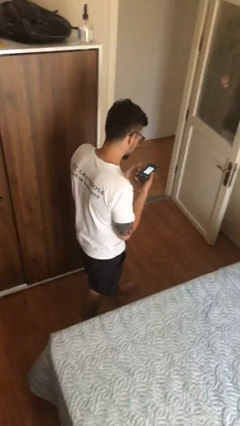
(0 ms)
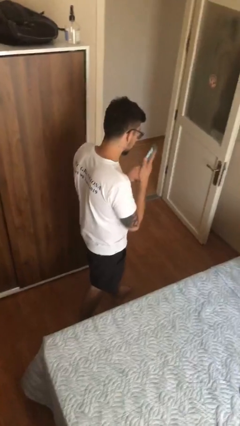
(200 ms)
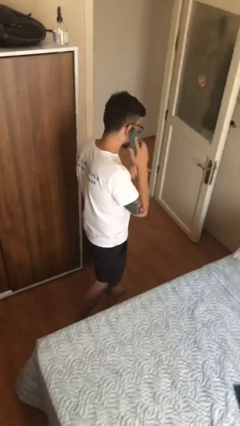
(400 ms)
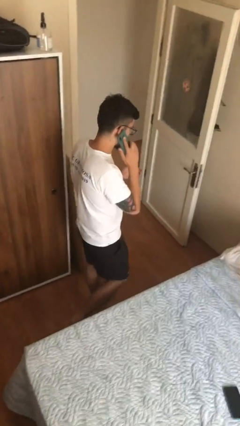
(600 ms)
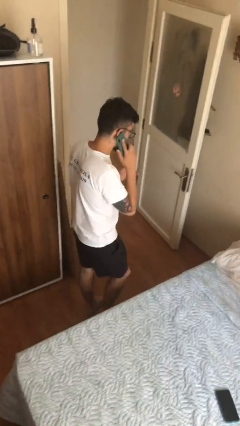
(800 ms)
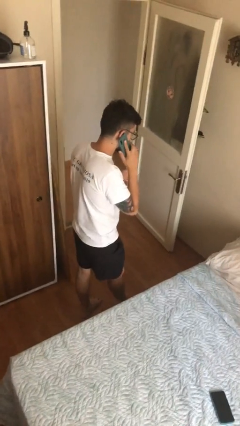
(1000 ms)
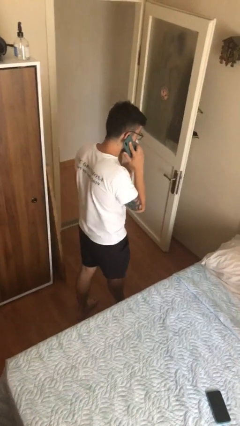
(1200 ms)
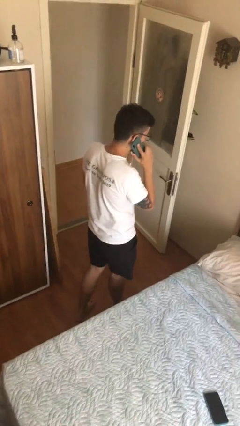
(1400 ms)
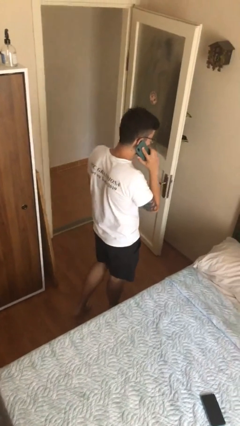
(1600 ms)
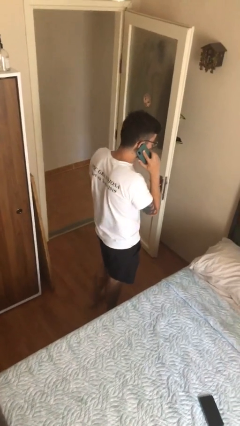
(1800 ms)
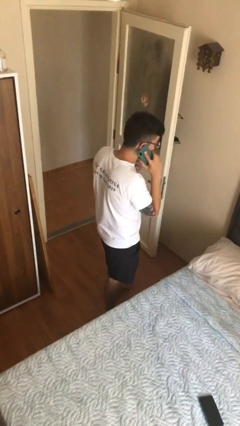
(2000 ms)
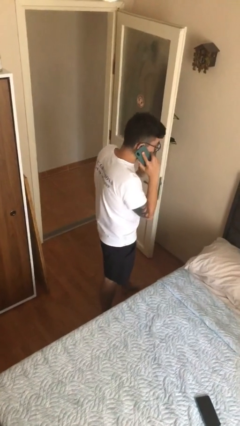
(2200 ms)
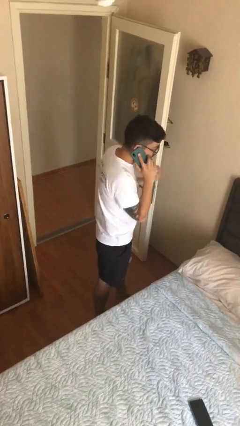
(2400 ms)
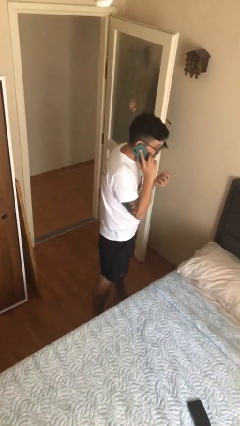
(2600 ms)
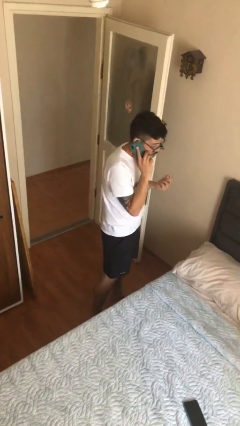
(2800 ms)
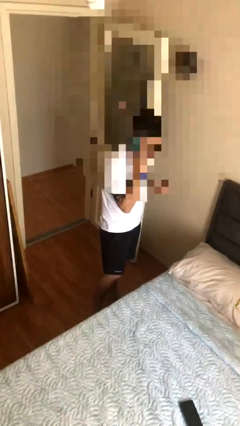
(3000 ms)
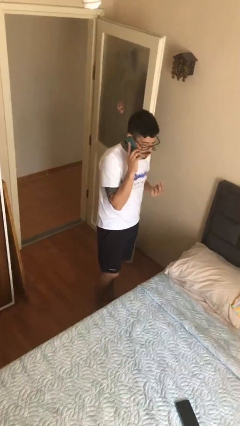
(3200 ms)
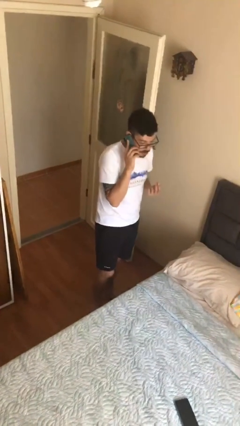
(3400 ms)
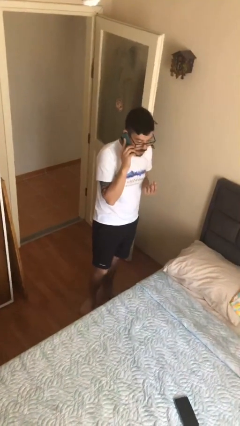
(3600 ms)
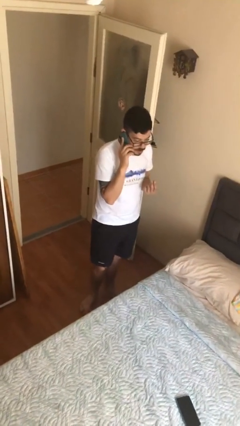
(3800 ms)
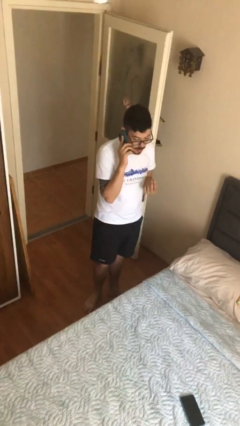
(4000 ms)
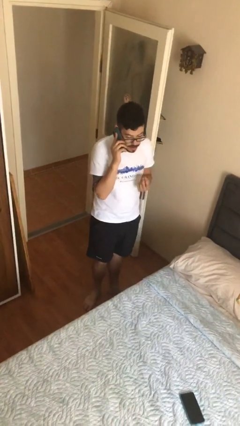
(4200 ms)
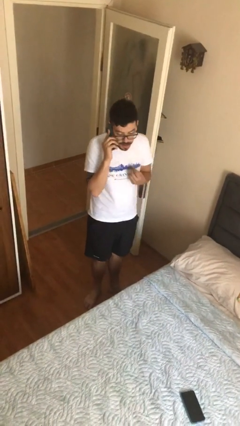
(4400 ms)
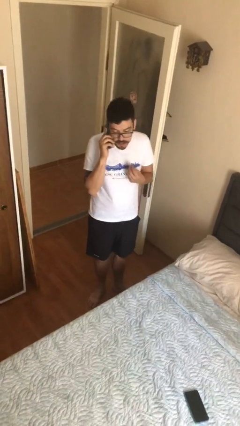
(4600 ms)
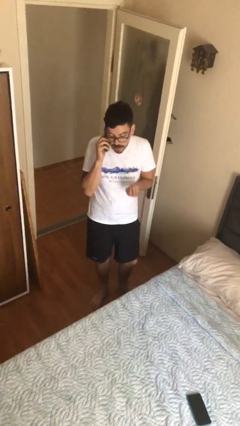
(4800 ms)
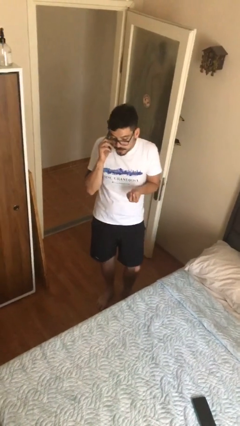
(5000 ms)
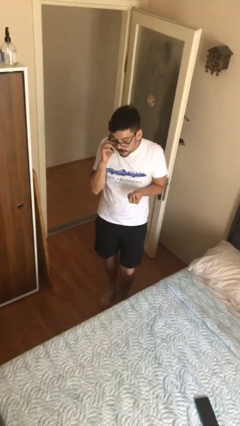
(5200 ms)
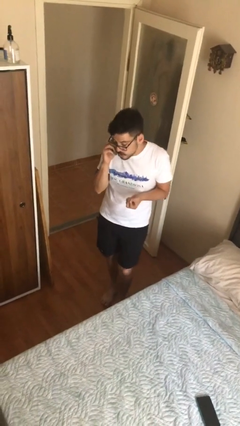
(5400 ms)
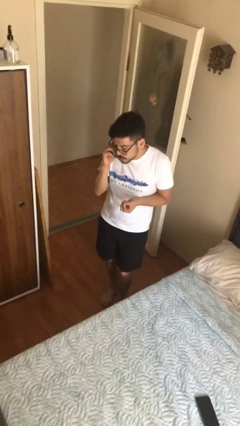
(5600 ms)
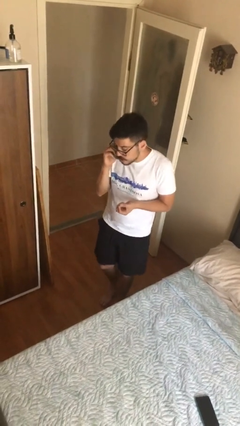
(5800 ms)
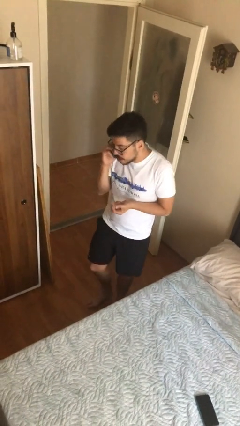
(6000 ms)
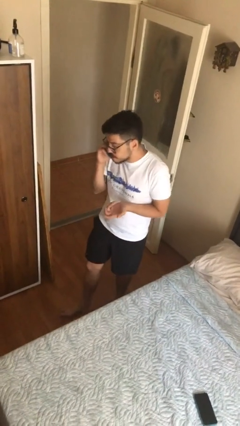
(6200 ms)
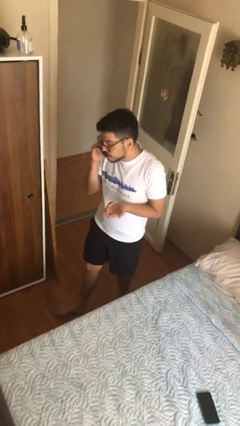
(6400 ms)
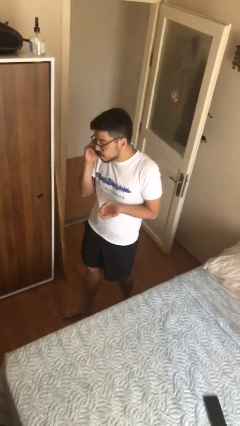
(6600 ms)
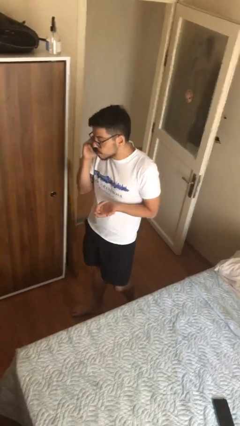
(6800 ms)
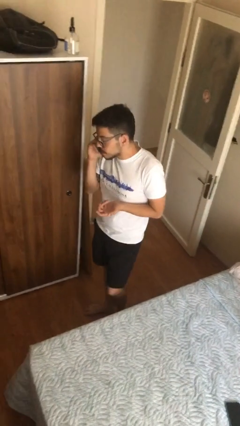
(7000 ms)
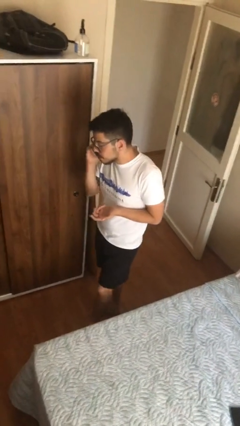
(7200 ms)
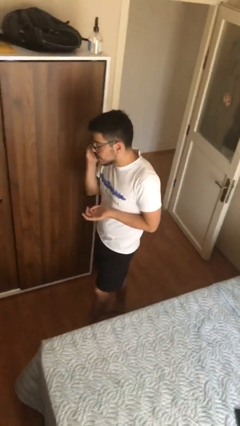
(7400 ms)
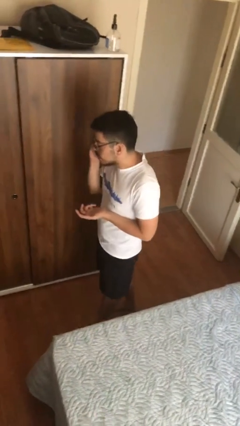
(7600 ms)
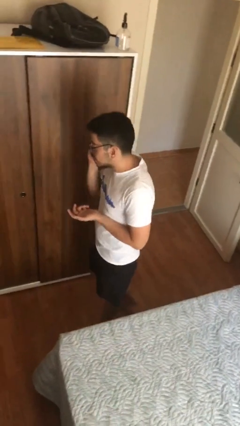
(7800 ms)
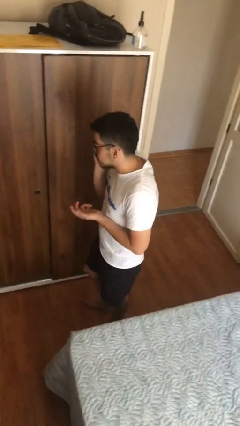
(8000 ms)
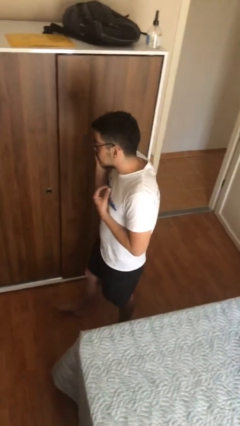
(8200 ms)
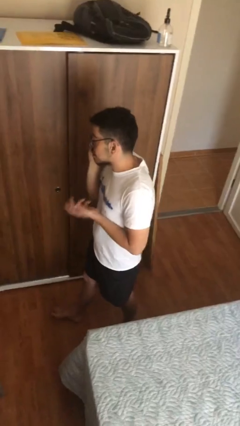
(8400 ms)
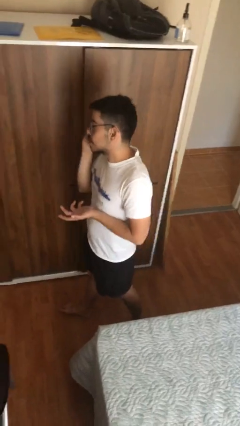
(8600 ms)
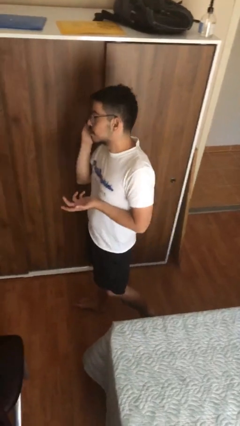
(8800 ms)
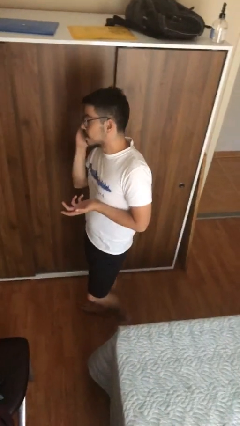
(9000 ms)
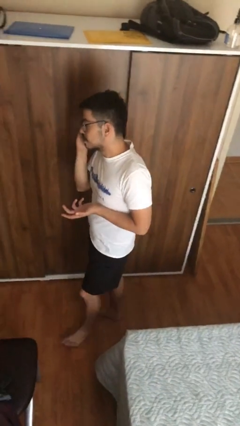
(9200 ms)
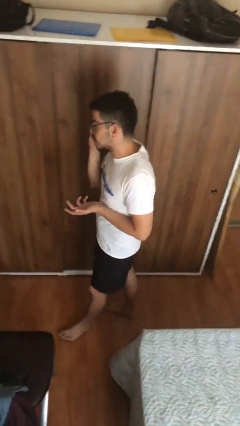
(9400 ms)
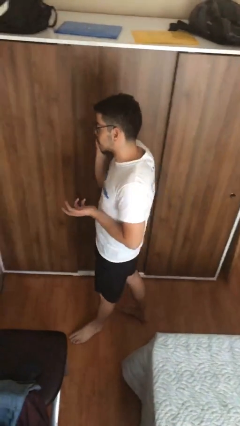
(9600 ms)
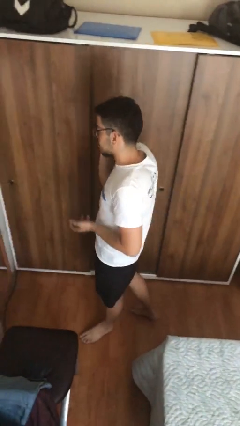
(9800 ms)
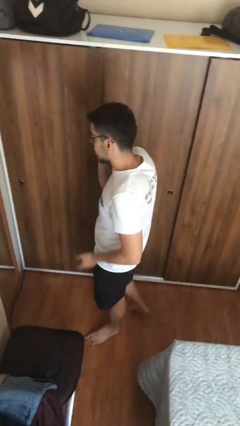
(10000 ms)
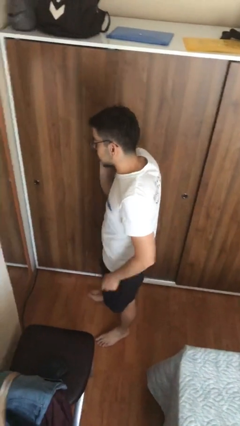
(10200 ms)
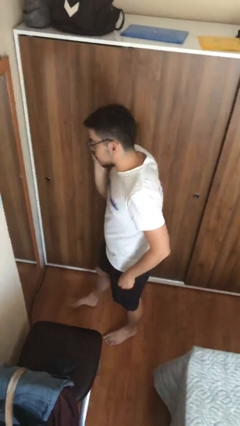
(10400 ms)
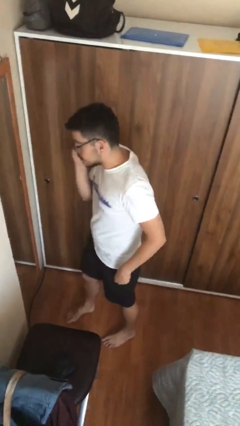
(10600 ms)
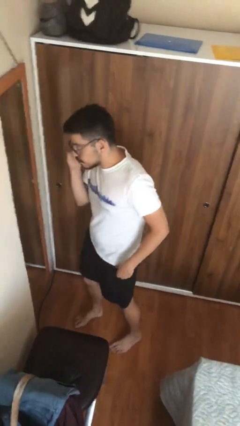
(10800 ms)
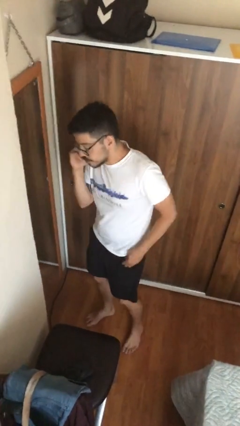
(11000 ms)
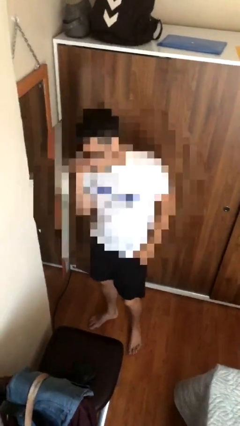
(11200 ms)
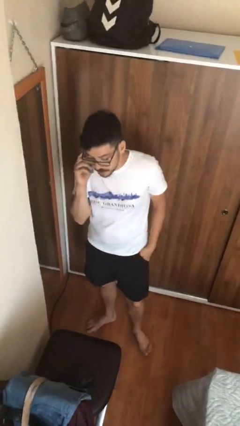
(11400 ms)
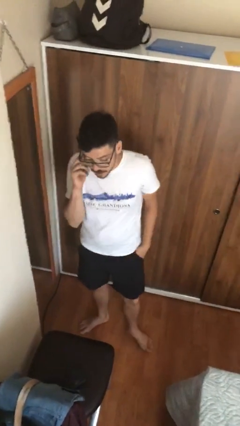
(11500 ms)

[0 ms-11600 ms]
person talks on phone

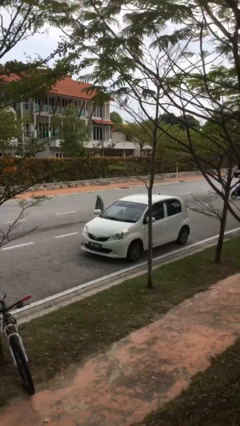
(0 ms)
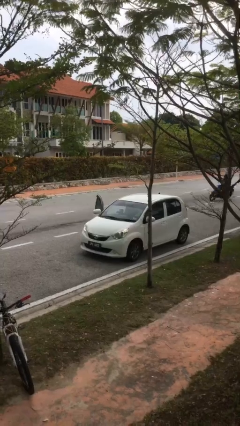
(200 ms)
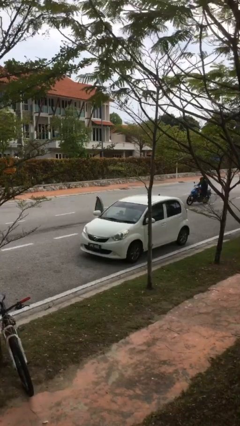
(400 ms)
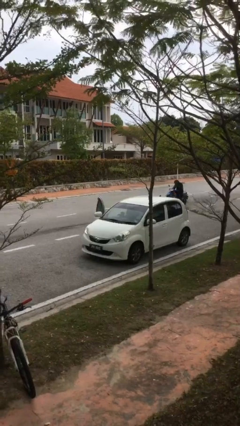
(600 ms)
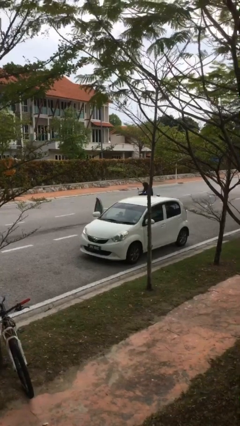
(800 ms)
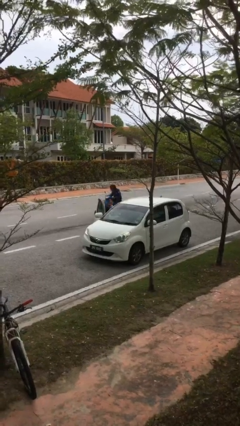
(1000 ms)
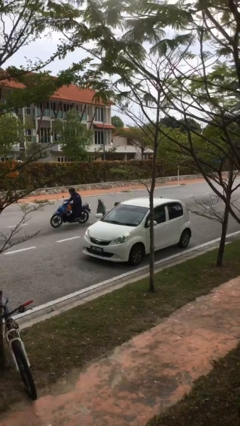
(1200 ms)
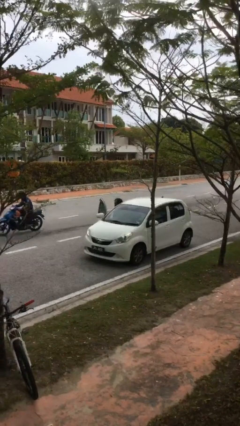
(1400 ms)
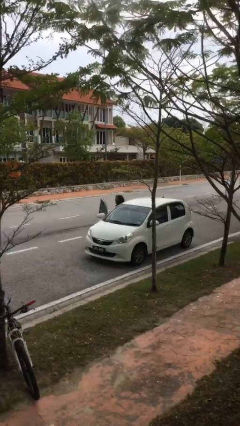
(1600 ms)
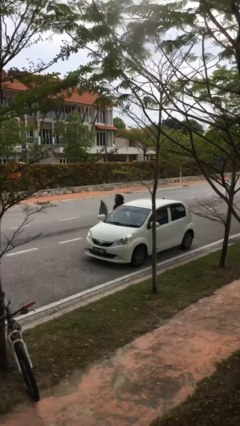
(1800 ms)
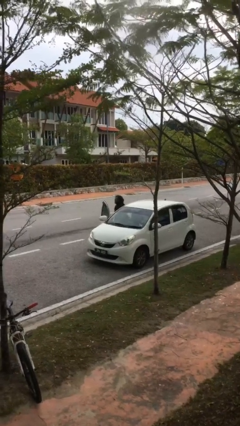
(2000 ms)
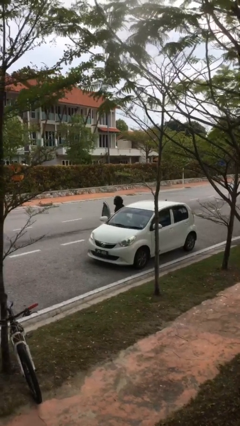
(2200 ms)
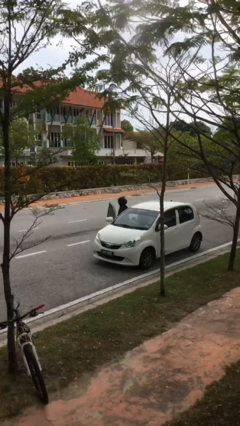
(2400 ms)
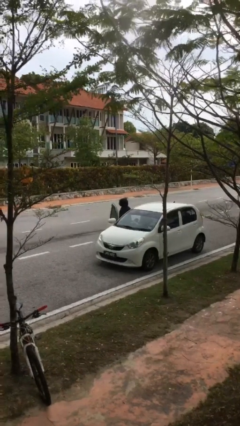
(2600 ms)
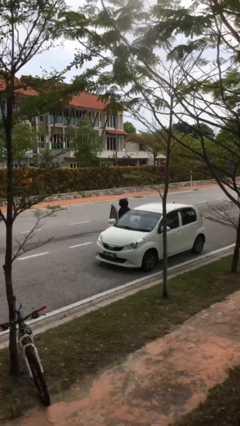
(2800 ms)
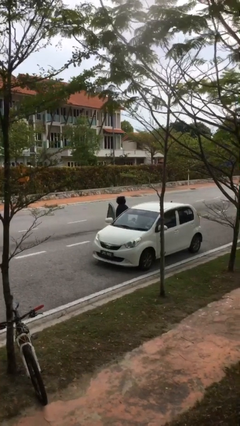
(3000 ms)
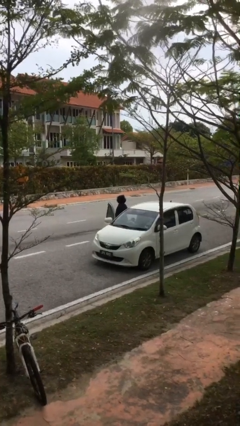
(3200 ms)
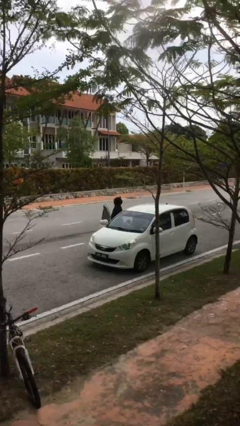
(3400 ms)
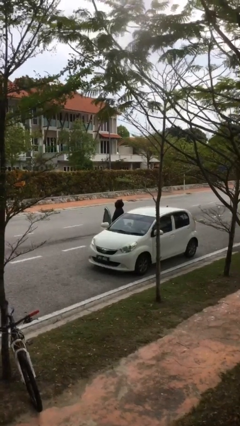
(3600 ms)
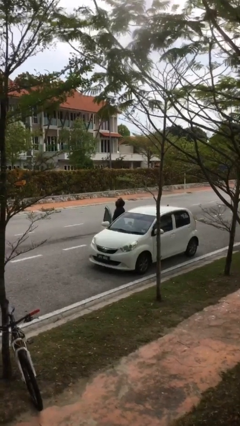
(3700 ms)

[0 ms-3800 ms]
person exits car

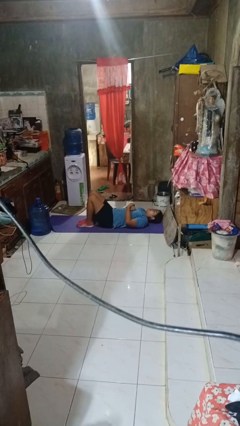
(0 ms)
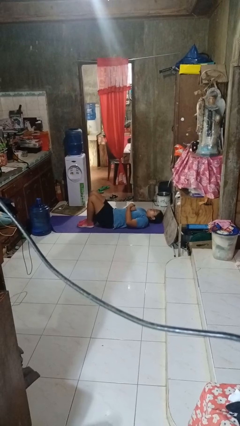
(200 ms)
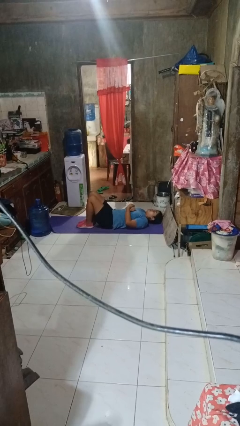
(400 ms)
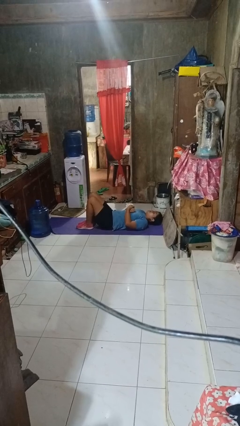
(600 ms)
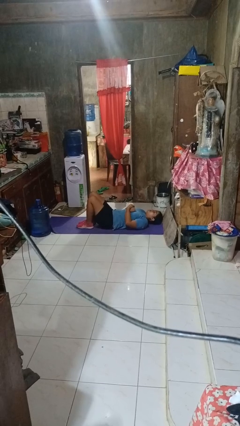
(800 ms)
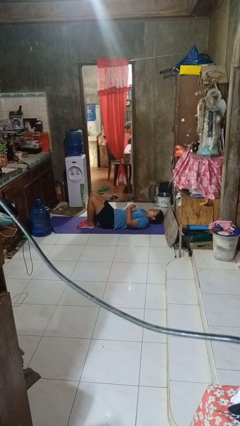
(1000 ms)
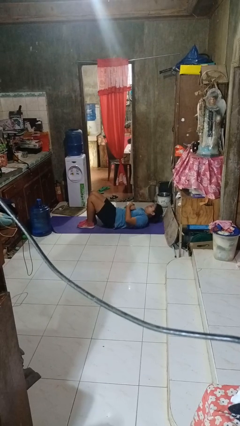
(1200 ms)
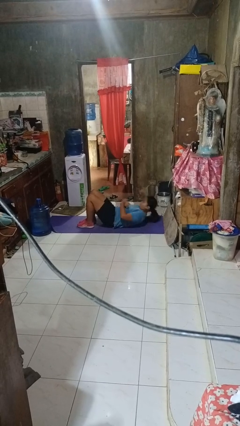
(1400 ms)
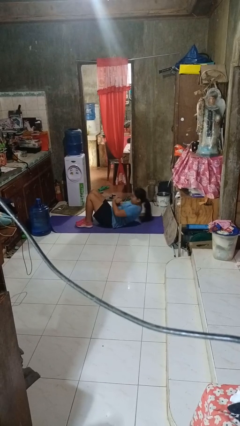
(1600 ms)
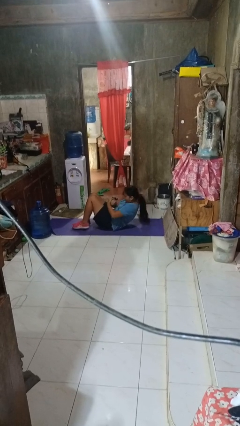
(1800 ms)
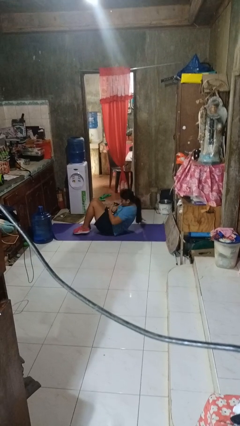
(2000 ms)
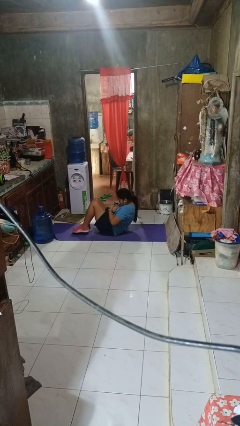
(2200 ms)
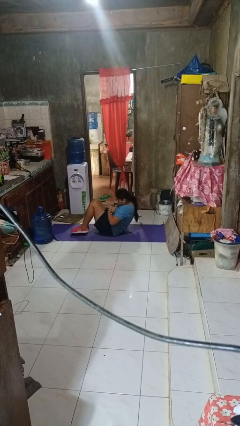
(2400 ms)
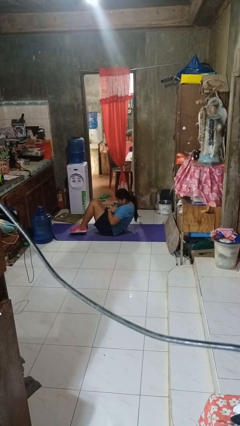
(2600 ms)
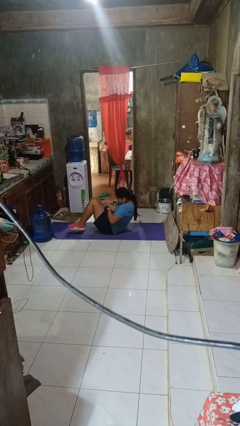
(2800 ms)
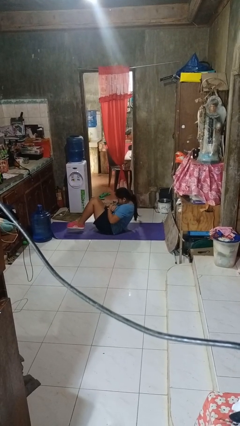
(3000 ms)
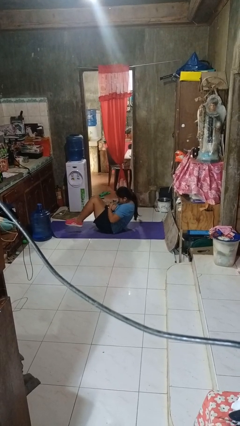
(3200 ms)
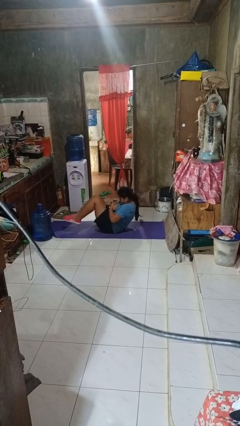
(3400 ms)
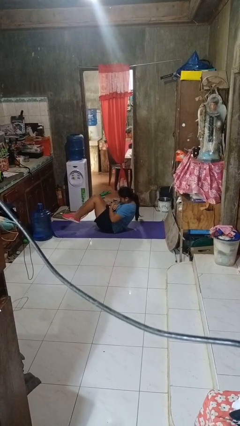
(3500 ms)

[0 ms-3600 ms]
person exercises with situp
